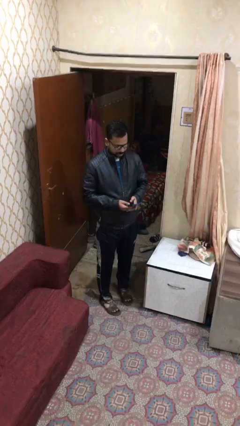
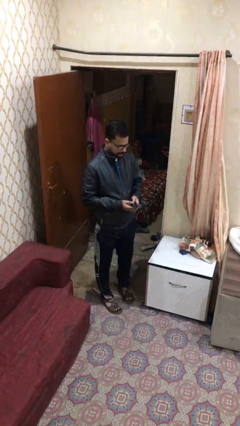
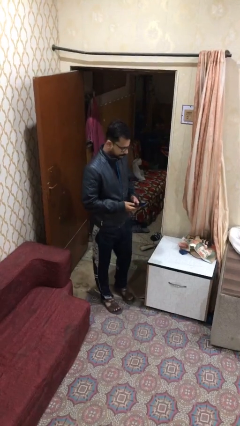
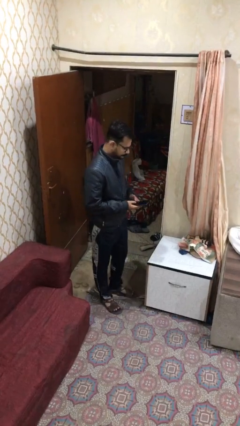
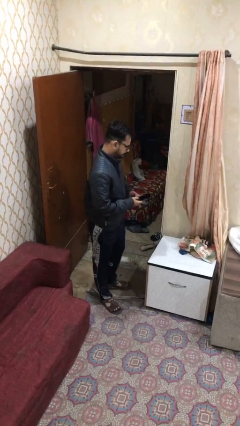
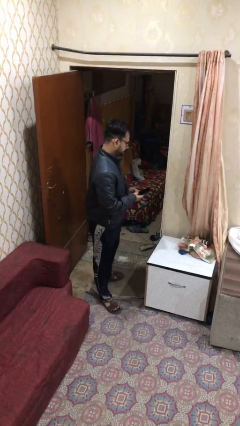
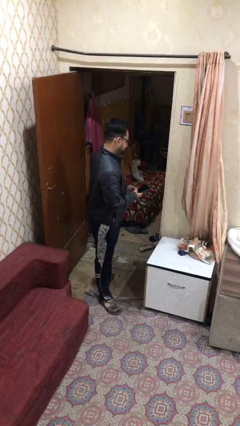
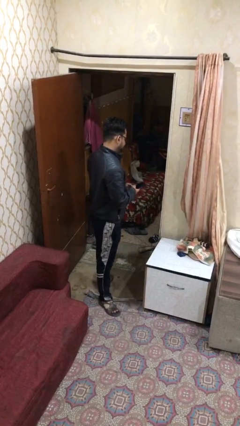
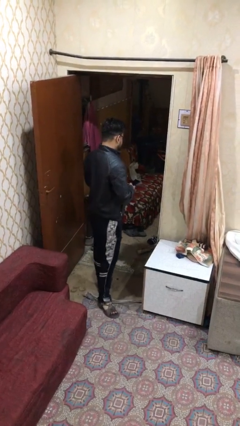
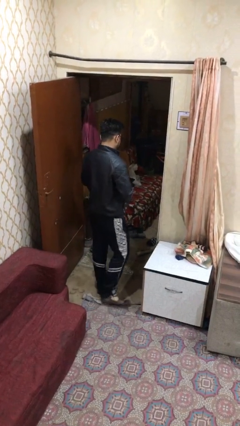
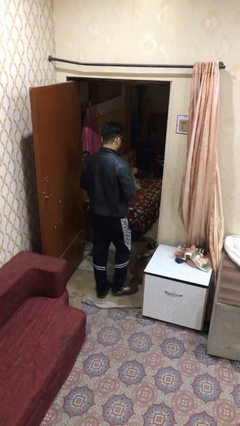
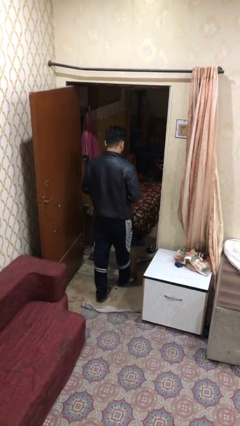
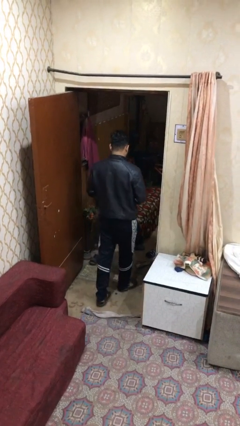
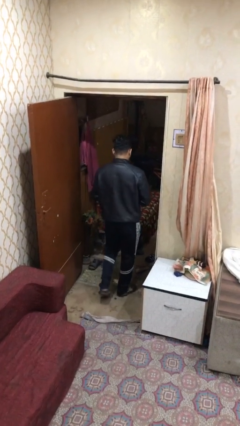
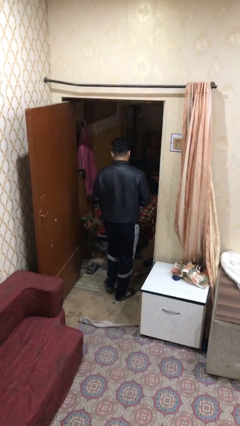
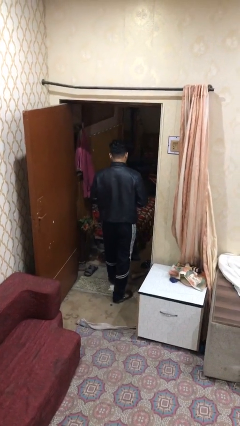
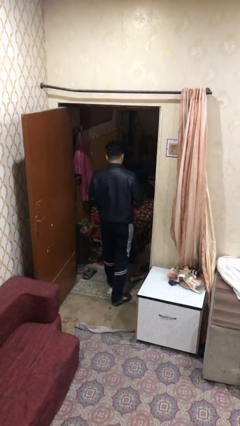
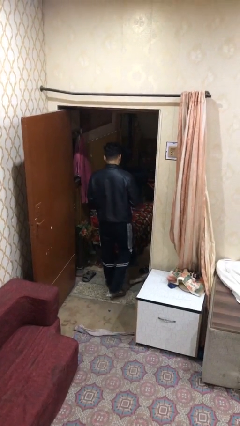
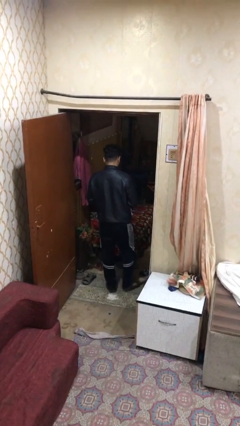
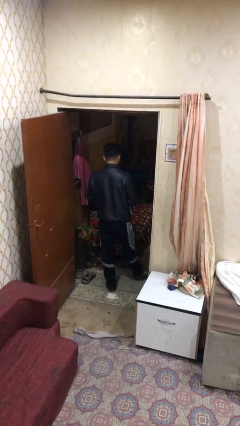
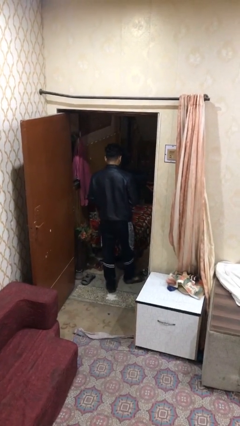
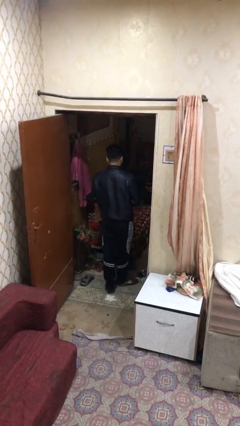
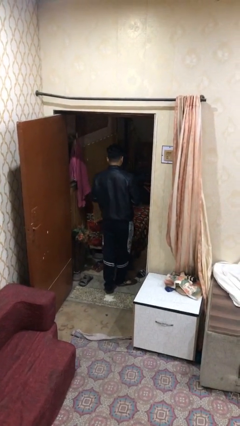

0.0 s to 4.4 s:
person exits scene through structure

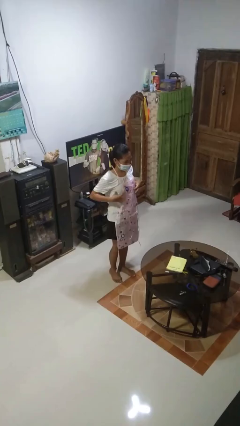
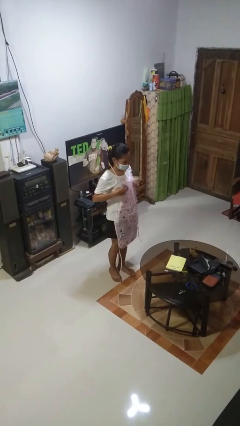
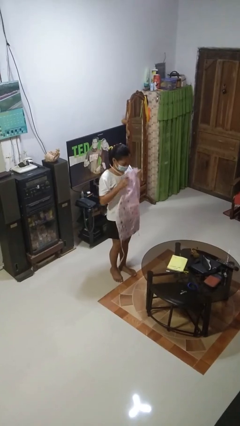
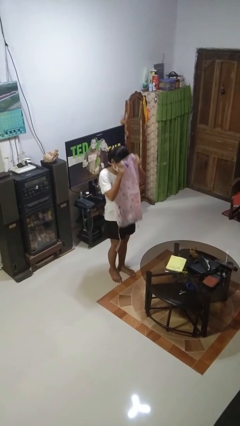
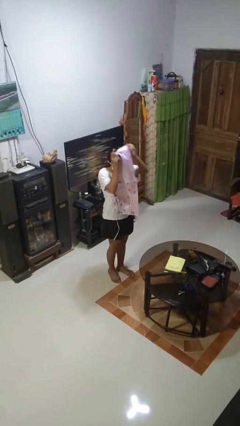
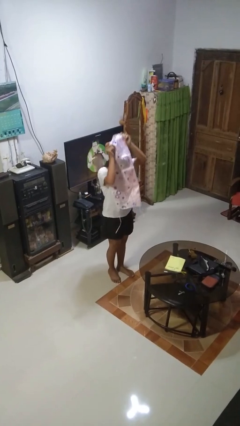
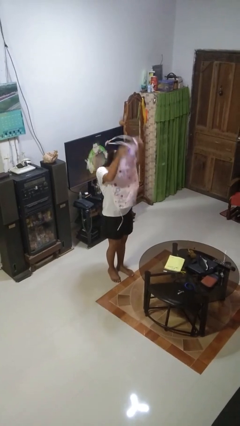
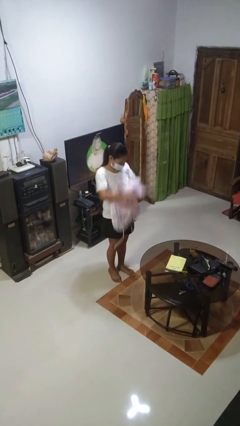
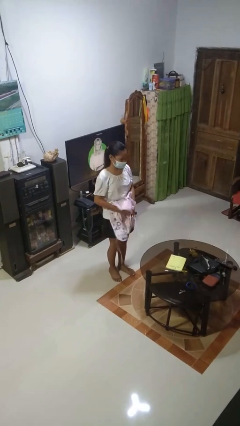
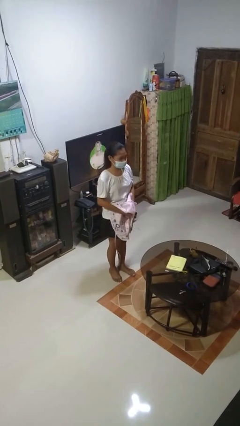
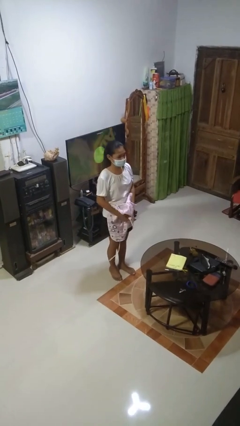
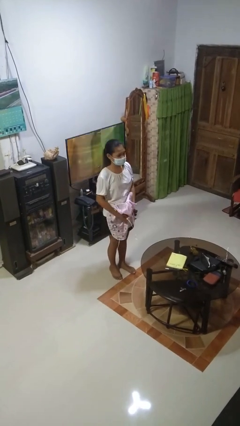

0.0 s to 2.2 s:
person takes off apron

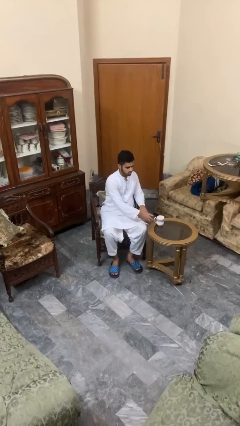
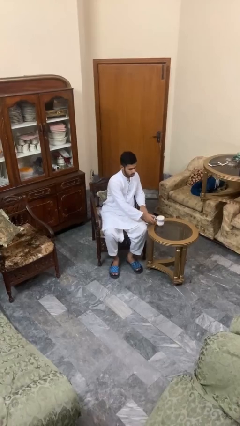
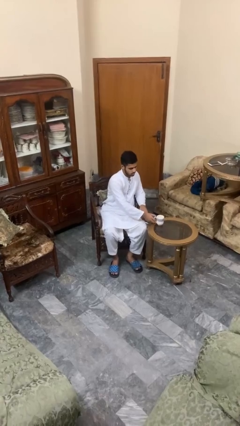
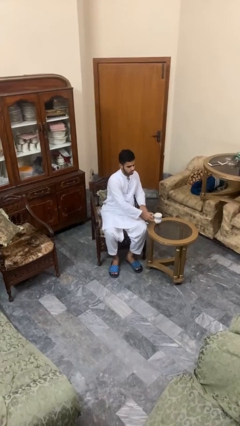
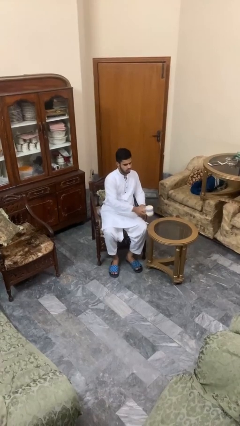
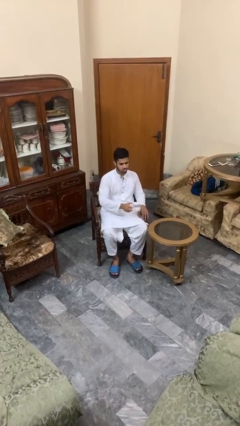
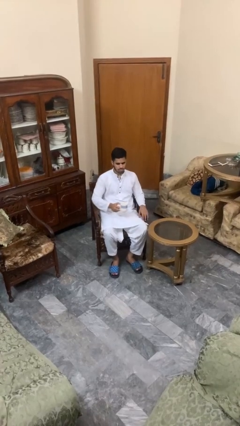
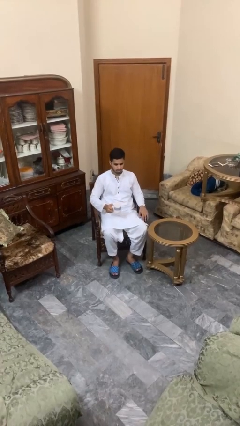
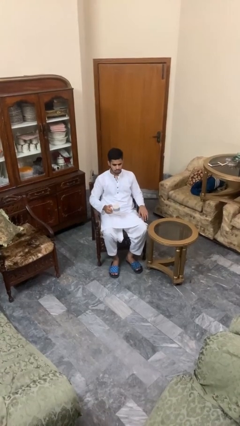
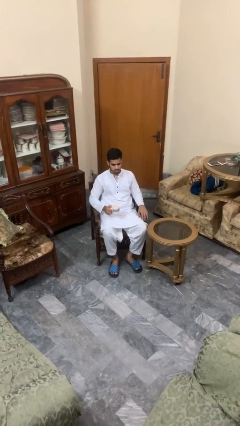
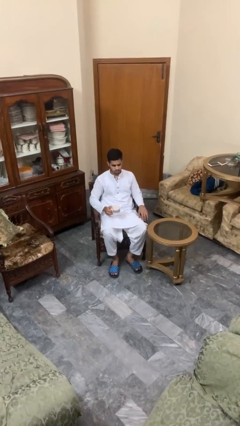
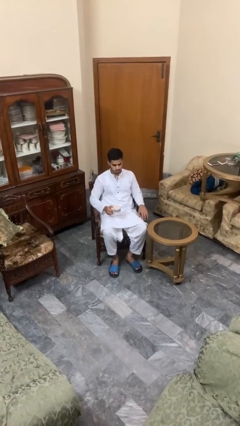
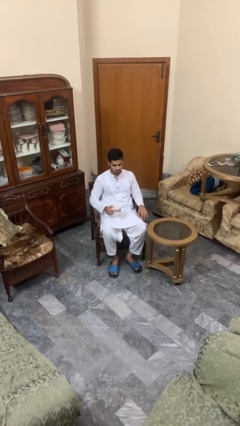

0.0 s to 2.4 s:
person picks up object from table

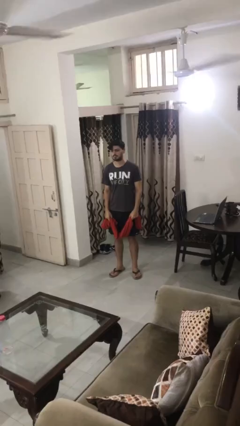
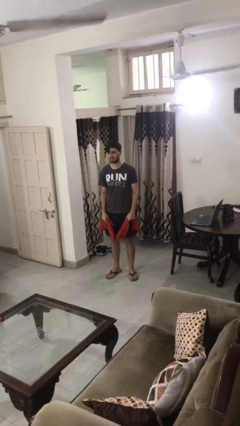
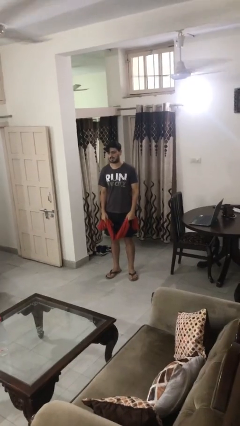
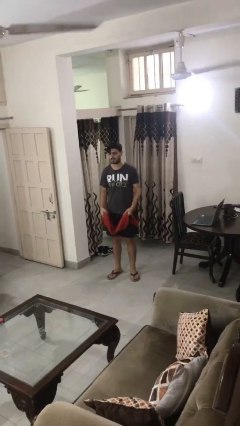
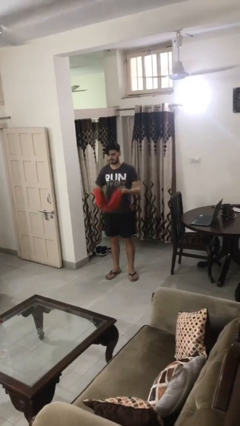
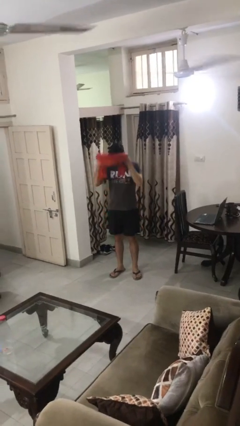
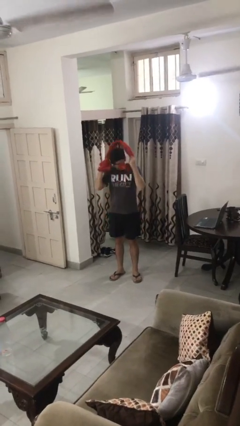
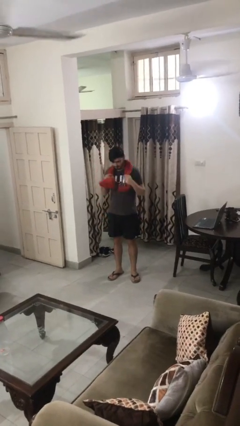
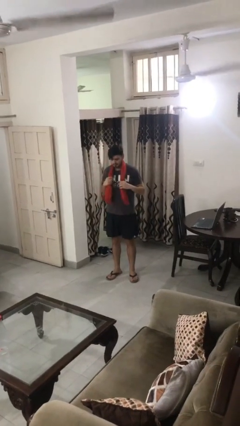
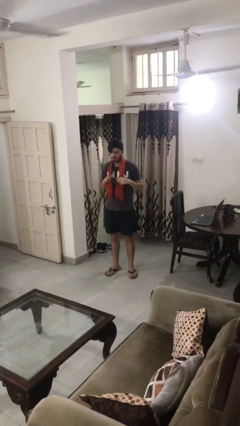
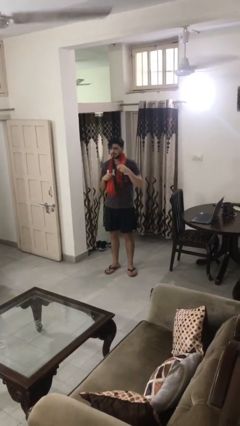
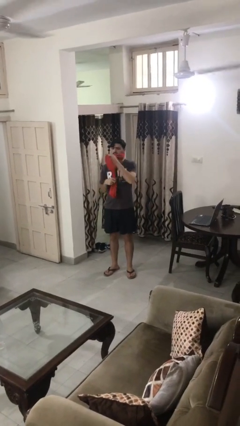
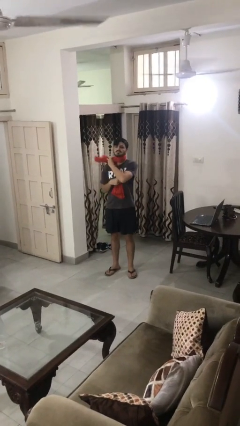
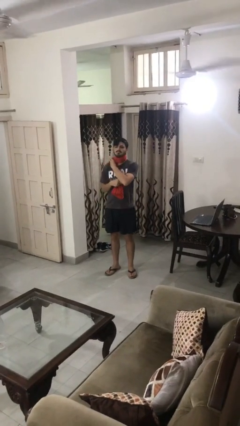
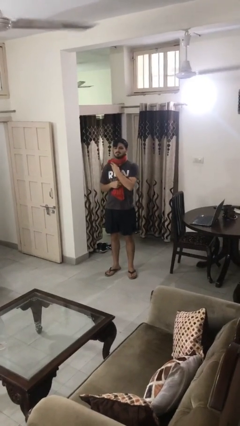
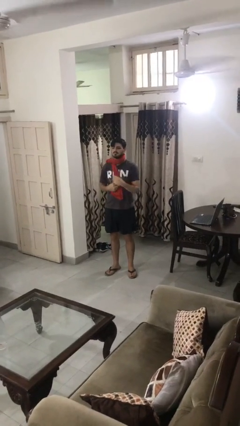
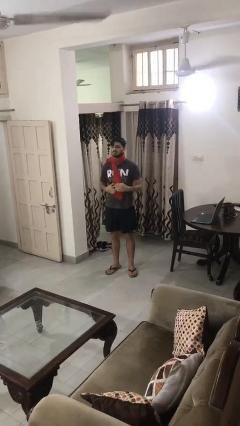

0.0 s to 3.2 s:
person puts on scarf

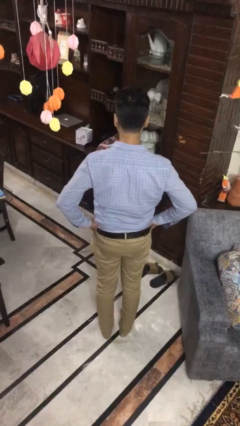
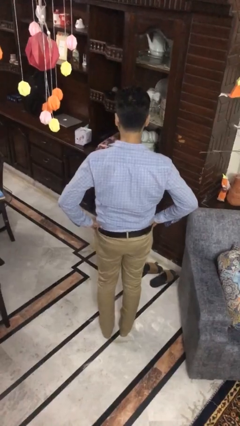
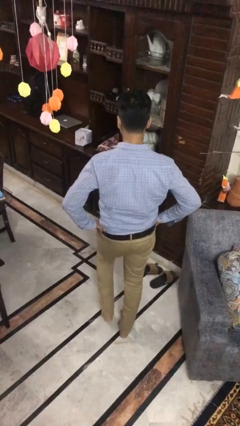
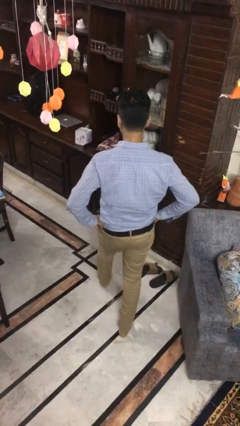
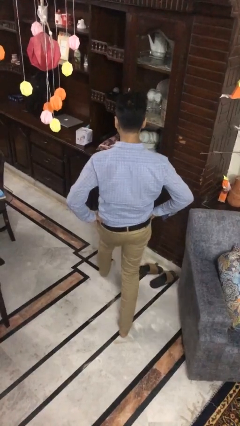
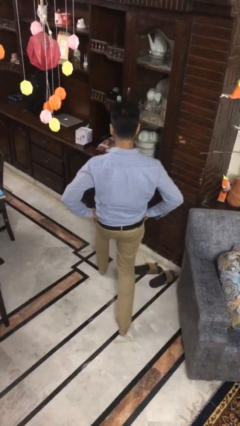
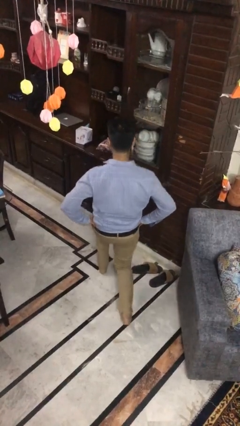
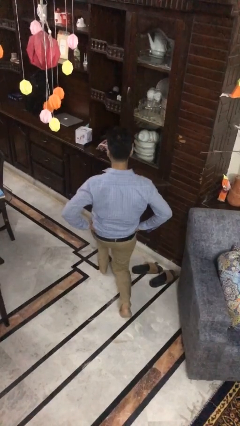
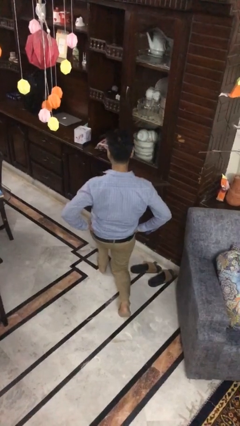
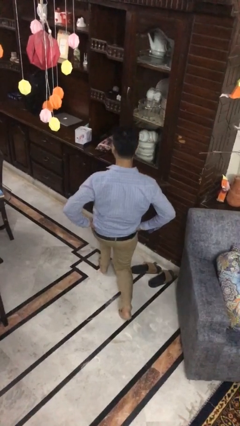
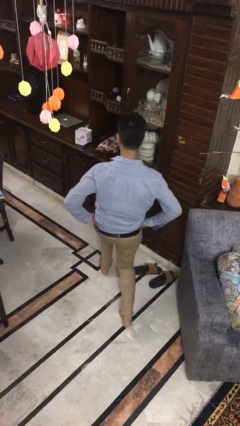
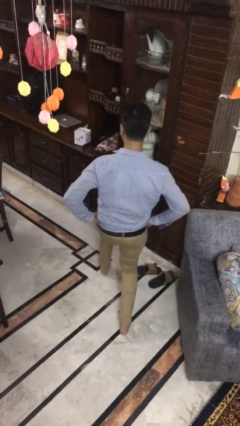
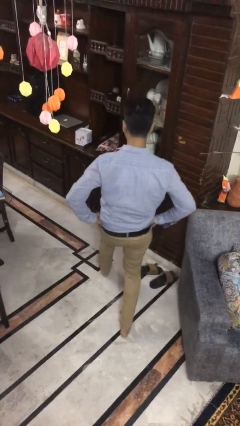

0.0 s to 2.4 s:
person exercises with lunges

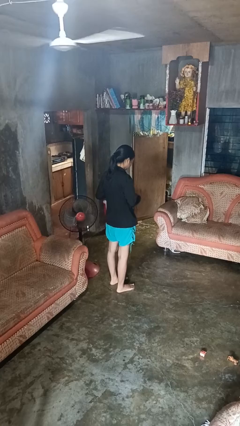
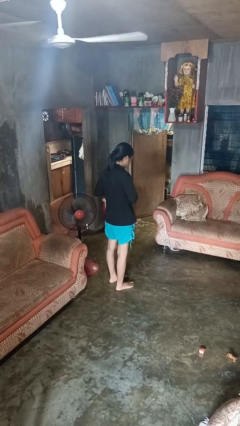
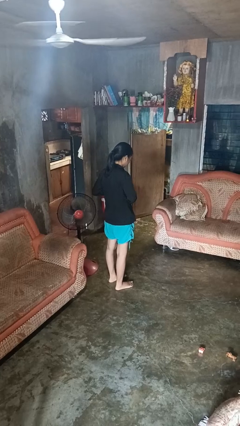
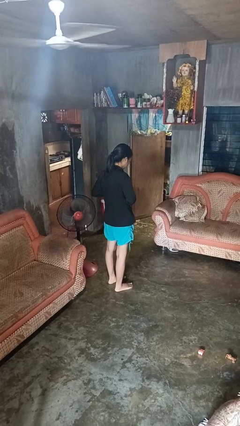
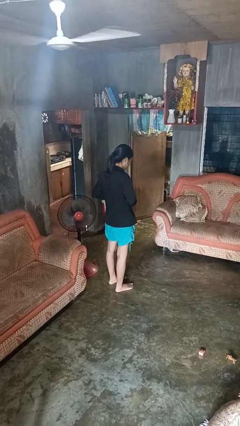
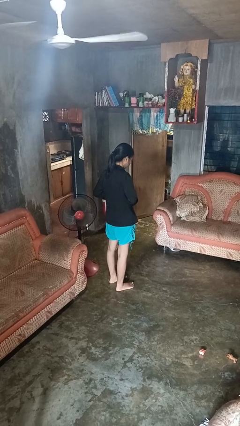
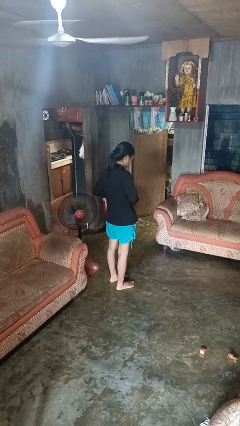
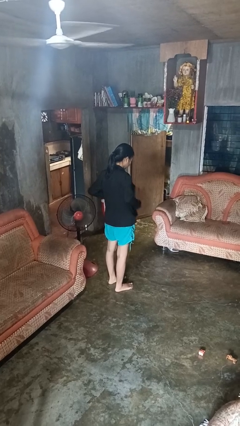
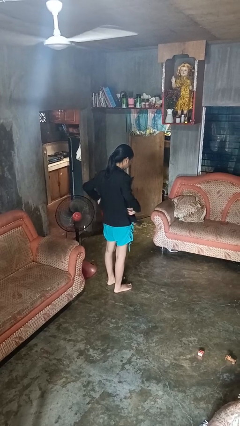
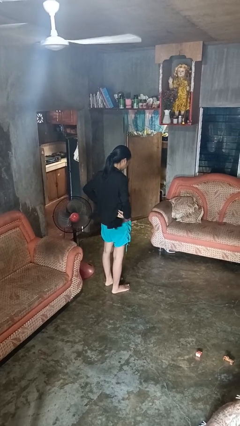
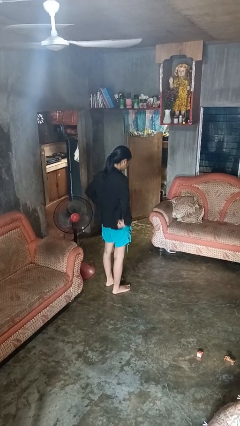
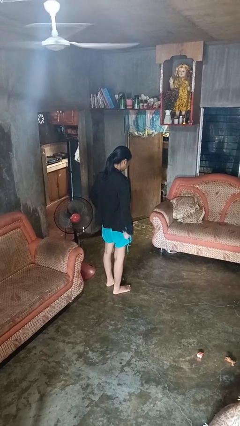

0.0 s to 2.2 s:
person unbuttons shirt

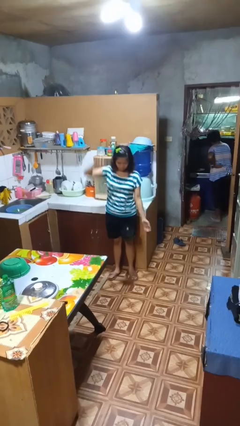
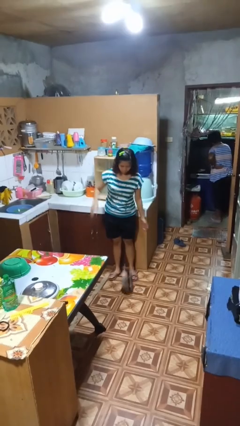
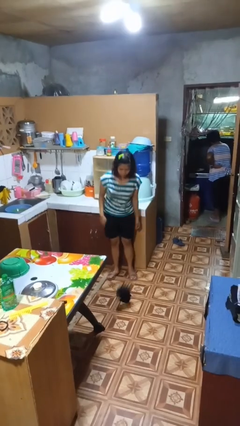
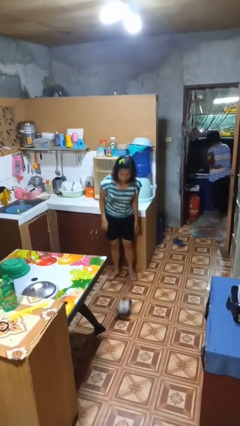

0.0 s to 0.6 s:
person catches dropped object
